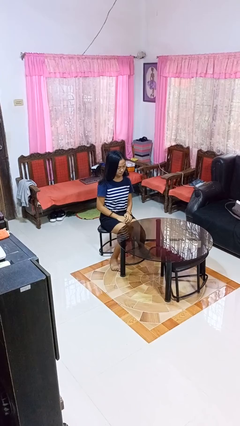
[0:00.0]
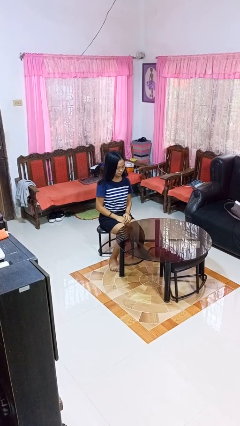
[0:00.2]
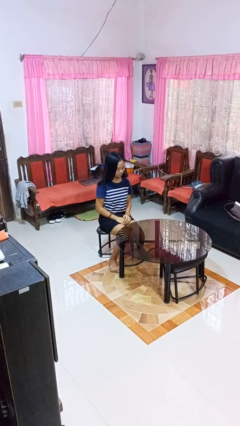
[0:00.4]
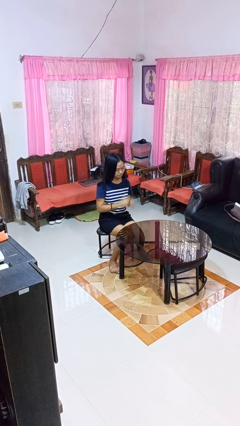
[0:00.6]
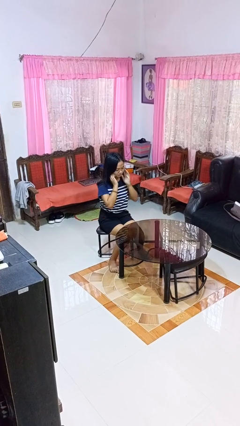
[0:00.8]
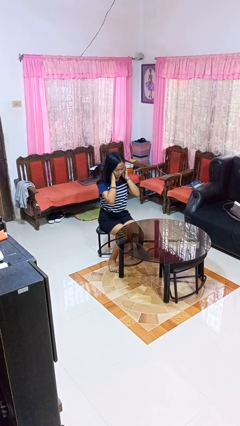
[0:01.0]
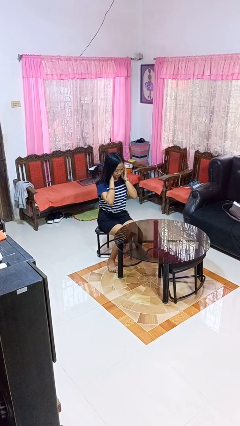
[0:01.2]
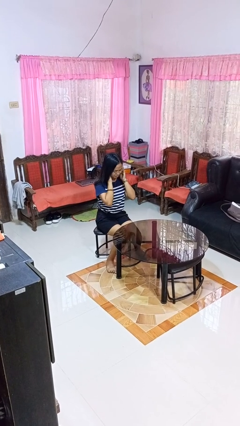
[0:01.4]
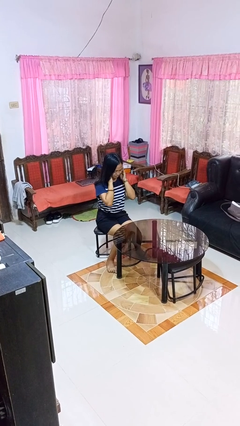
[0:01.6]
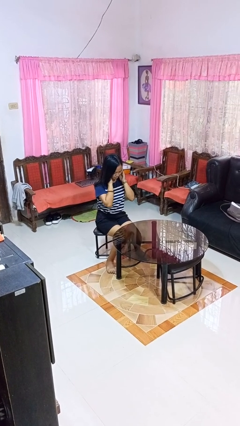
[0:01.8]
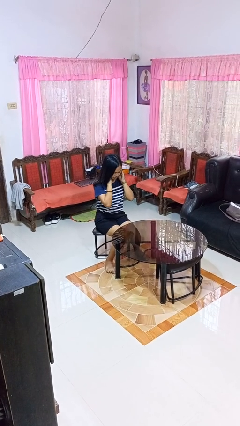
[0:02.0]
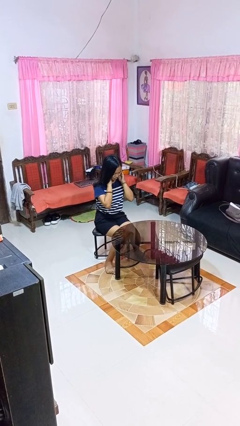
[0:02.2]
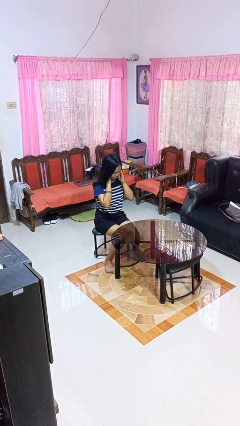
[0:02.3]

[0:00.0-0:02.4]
person puts fingers in ear

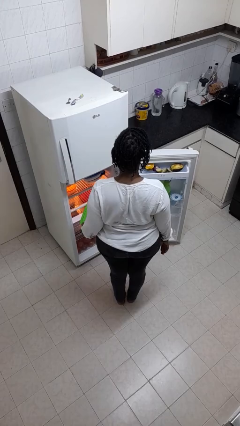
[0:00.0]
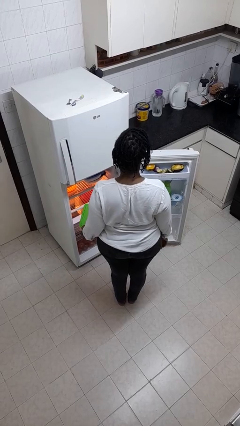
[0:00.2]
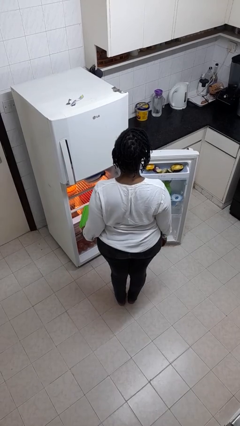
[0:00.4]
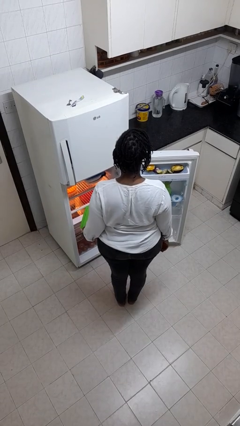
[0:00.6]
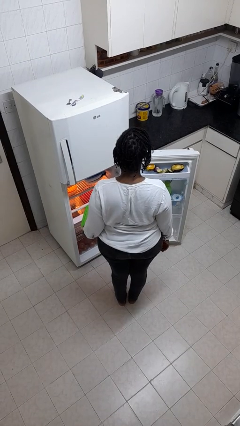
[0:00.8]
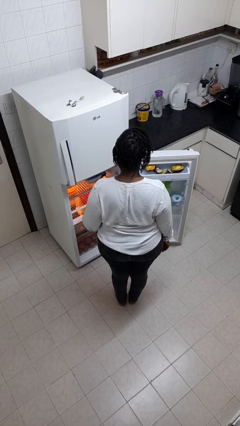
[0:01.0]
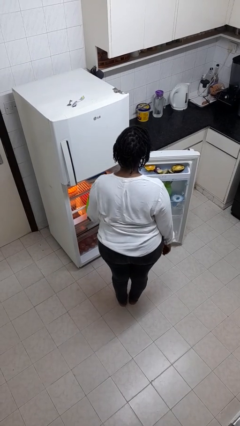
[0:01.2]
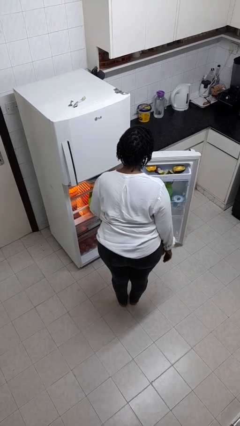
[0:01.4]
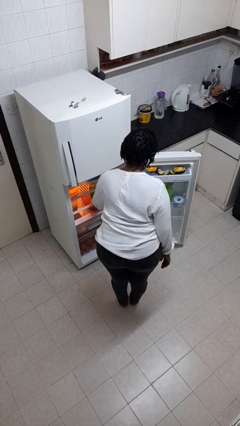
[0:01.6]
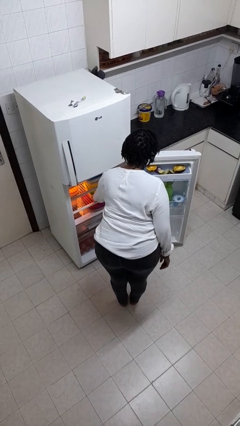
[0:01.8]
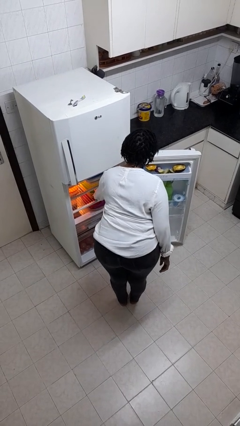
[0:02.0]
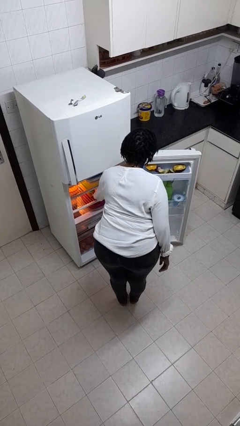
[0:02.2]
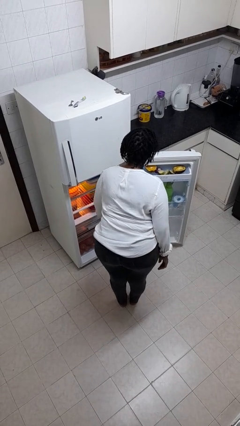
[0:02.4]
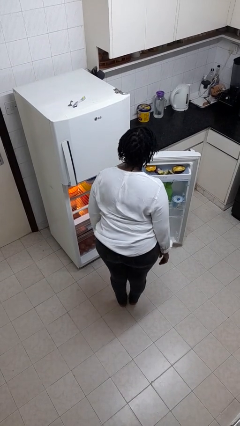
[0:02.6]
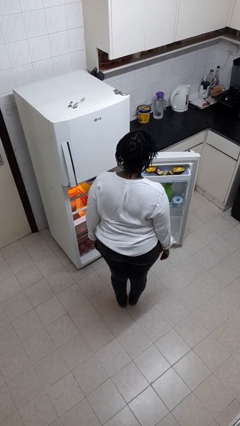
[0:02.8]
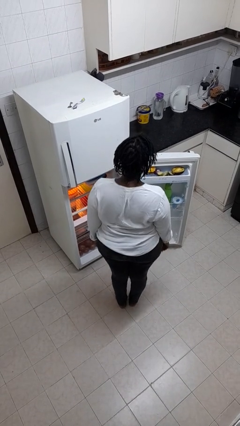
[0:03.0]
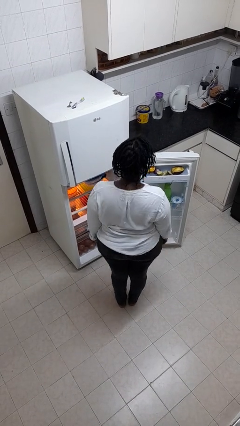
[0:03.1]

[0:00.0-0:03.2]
person puts object into refrigerator

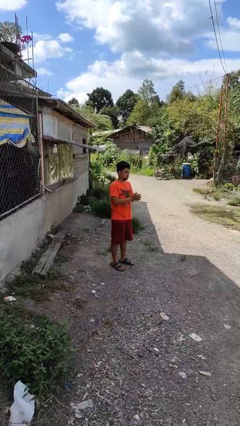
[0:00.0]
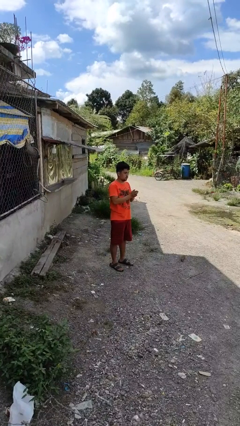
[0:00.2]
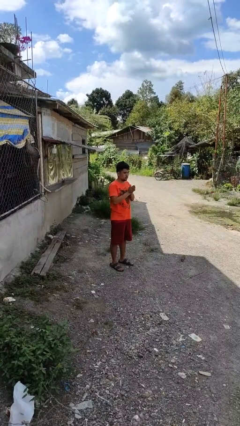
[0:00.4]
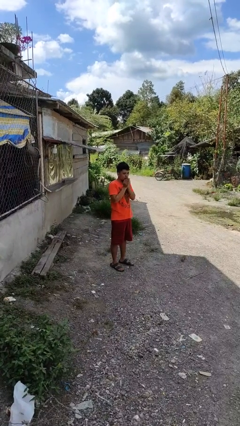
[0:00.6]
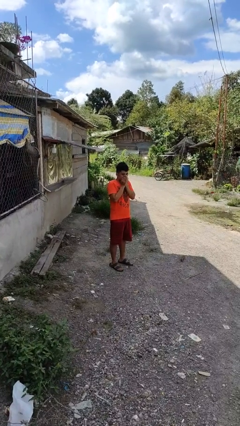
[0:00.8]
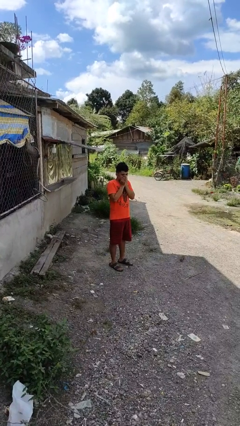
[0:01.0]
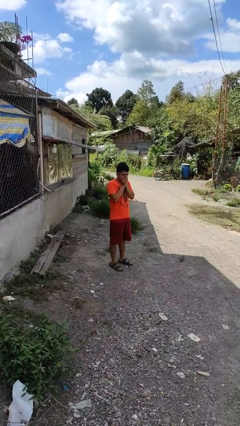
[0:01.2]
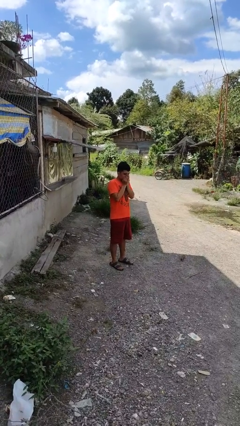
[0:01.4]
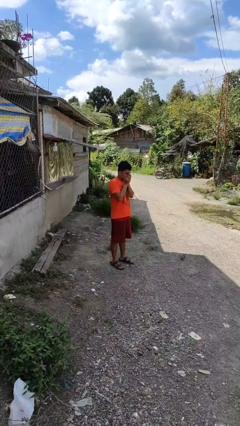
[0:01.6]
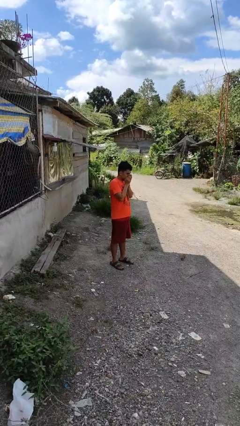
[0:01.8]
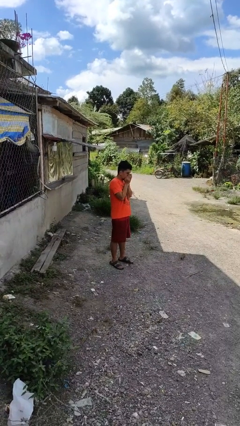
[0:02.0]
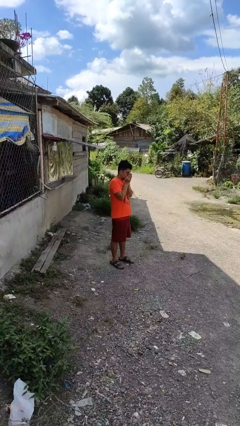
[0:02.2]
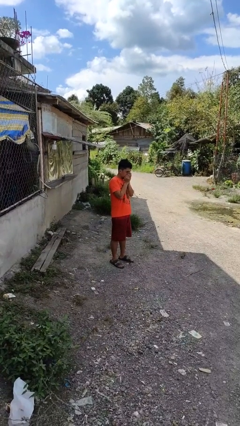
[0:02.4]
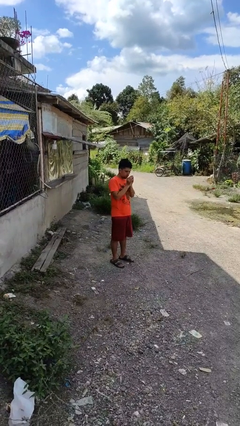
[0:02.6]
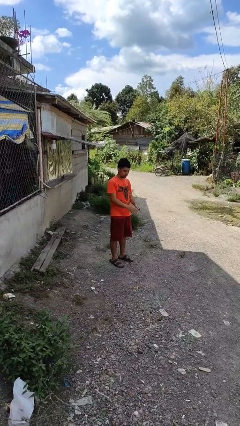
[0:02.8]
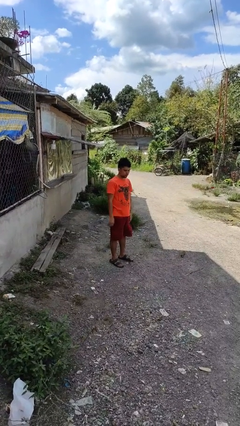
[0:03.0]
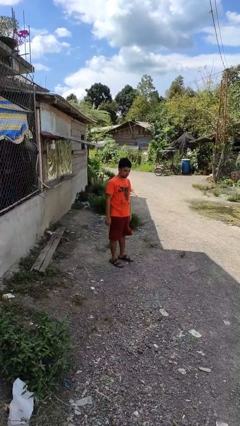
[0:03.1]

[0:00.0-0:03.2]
person blows into hands

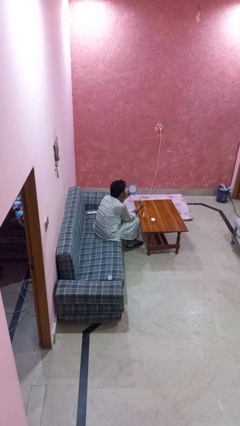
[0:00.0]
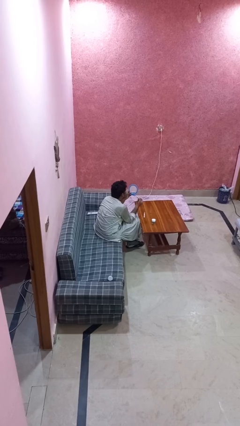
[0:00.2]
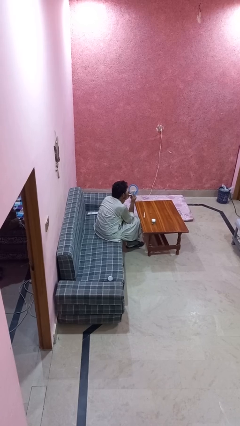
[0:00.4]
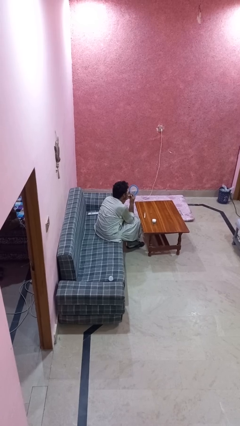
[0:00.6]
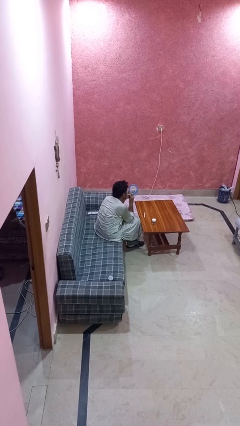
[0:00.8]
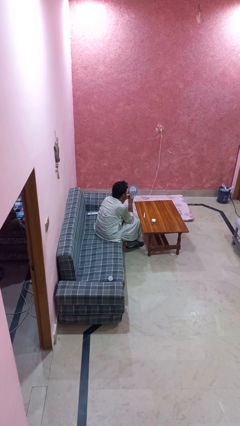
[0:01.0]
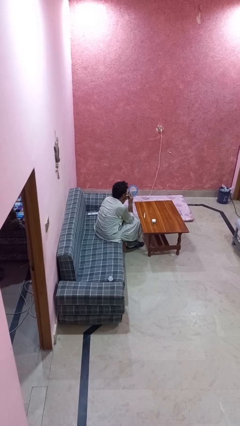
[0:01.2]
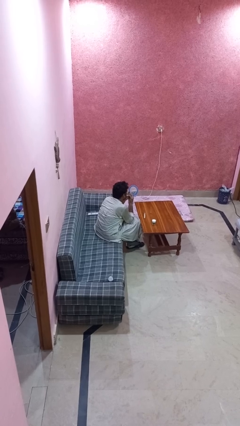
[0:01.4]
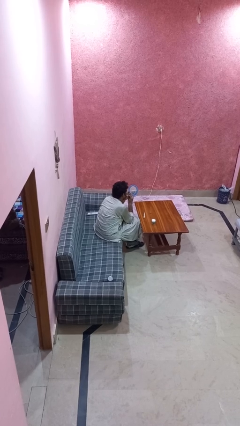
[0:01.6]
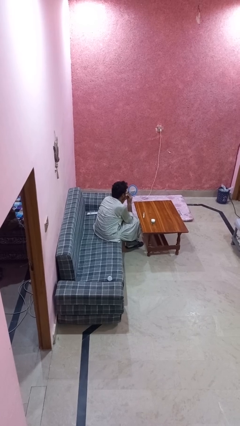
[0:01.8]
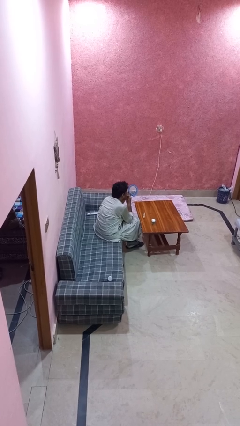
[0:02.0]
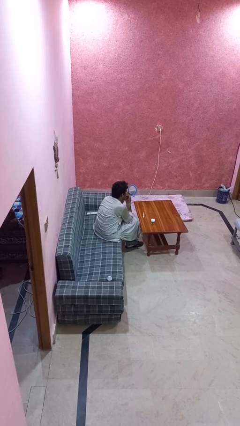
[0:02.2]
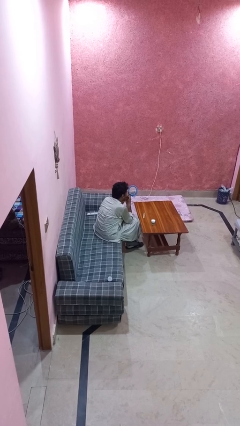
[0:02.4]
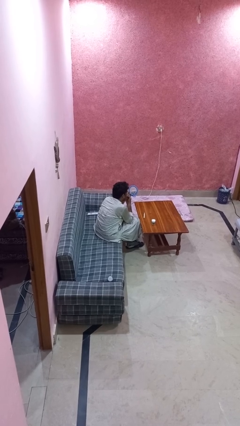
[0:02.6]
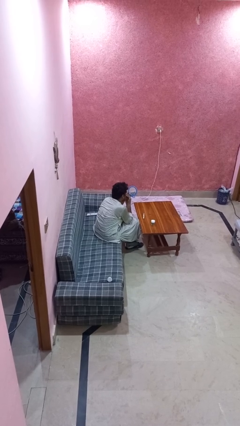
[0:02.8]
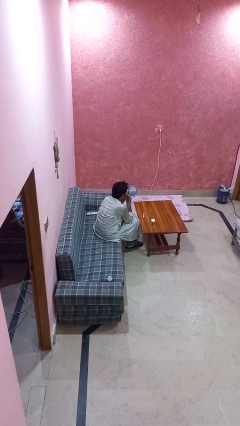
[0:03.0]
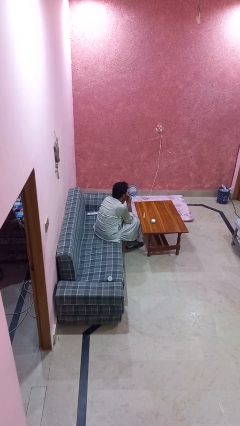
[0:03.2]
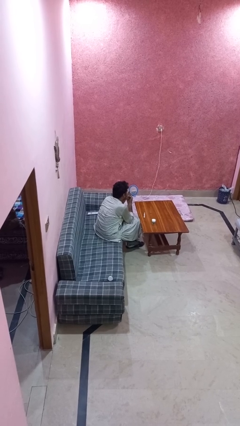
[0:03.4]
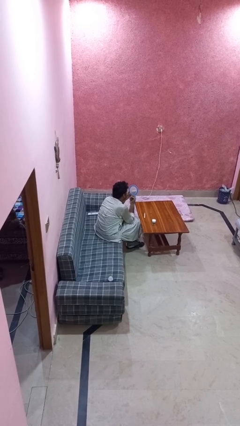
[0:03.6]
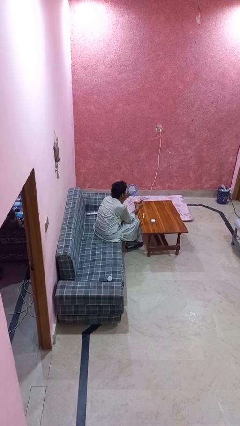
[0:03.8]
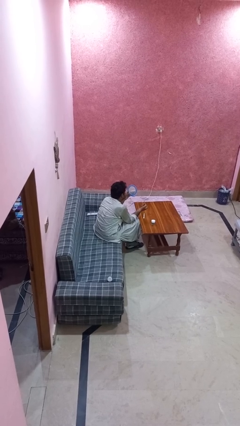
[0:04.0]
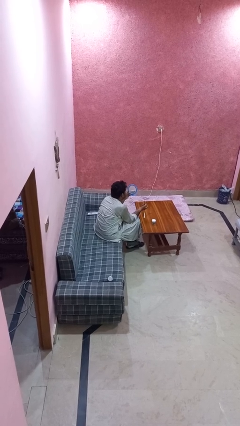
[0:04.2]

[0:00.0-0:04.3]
person applies lip makeup

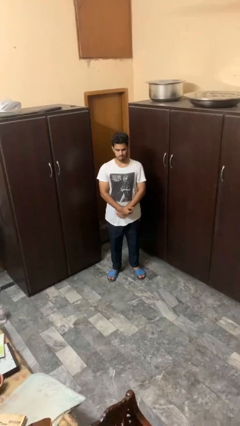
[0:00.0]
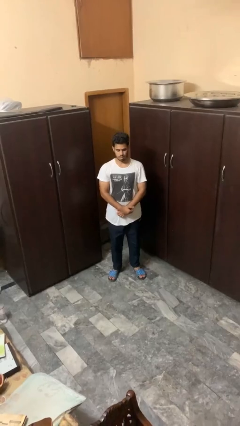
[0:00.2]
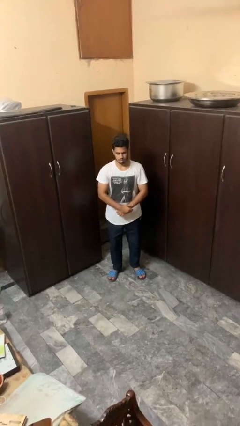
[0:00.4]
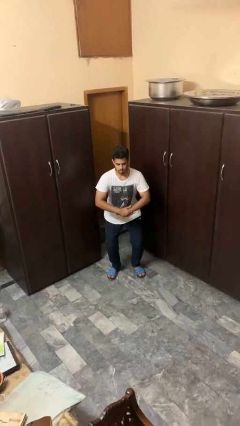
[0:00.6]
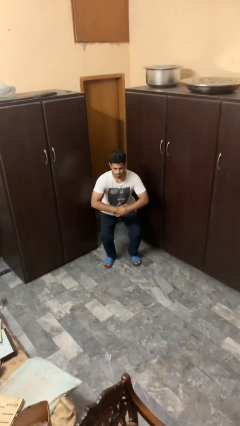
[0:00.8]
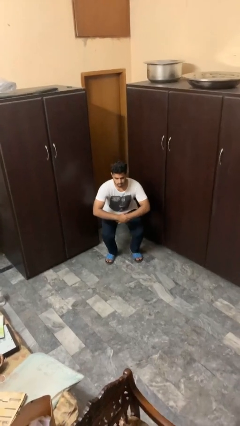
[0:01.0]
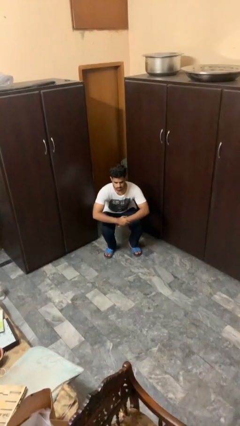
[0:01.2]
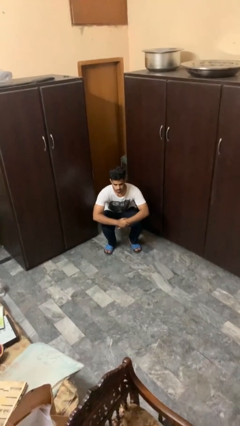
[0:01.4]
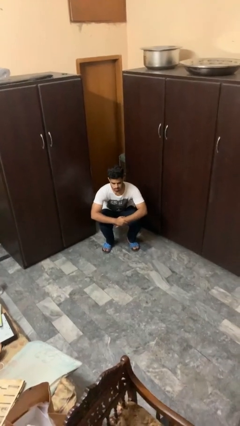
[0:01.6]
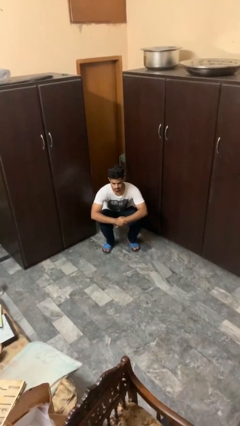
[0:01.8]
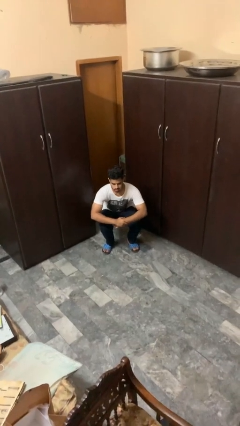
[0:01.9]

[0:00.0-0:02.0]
person squats

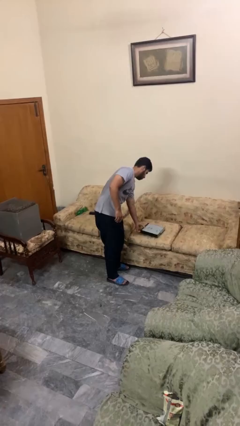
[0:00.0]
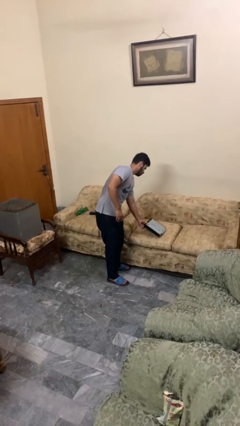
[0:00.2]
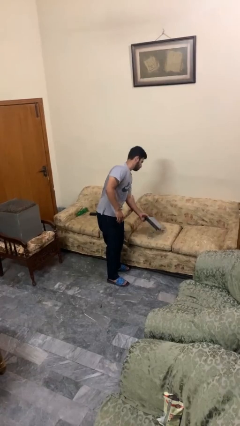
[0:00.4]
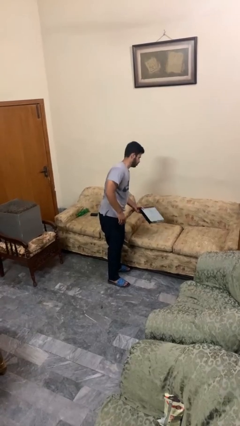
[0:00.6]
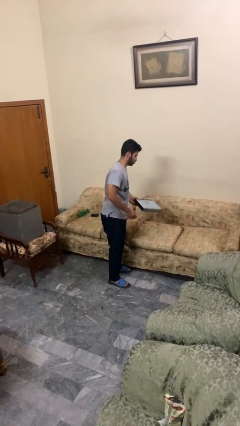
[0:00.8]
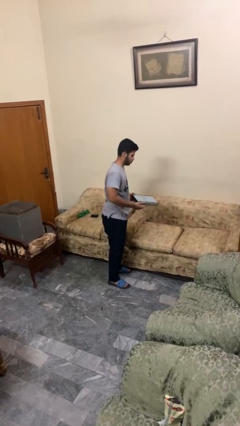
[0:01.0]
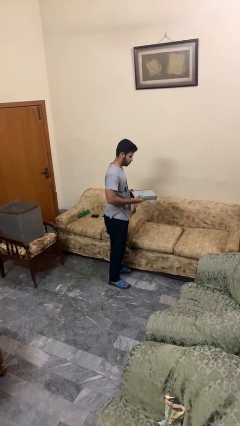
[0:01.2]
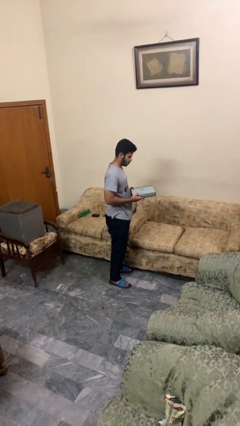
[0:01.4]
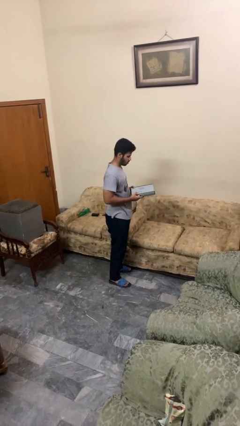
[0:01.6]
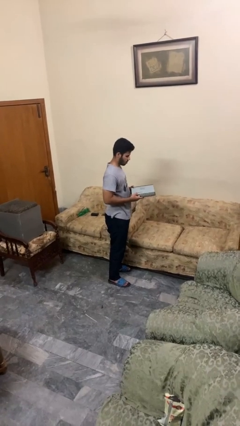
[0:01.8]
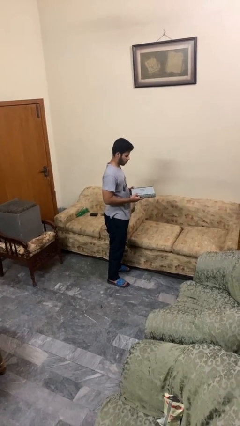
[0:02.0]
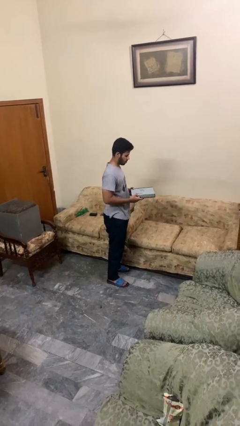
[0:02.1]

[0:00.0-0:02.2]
person picks up object from couch
